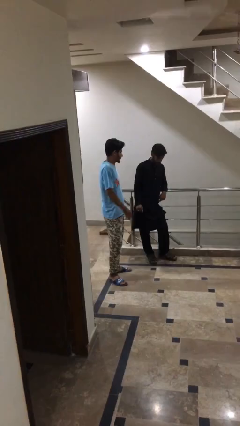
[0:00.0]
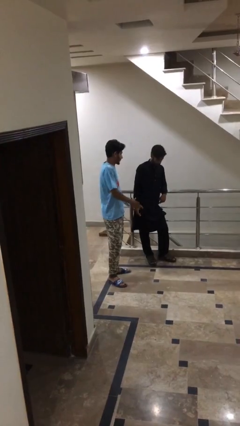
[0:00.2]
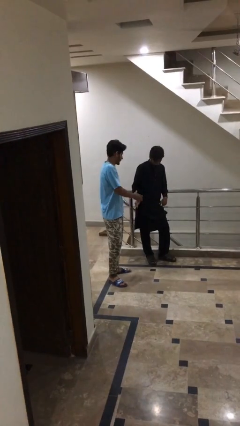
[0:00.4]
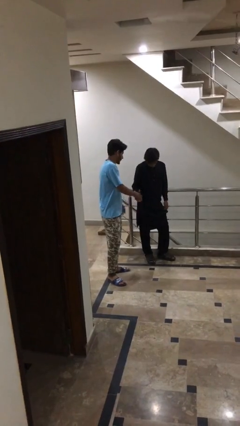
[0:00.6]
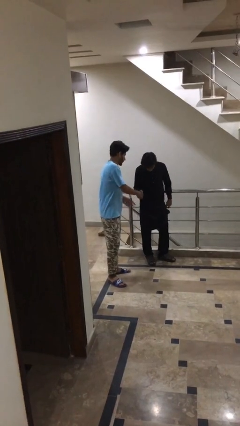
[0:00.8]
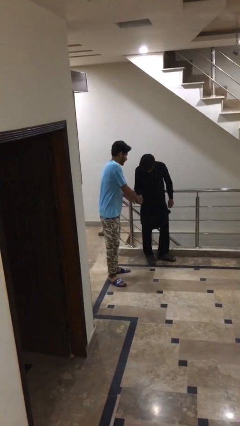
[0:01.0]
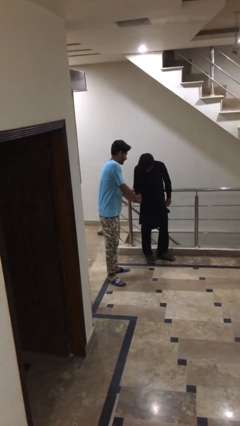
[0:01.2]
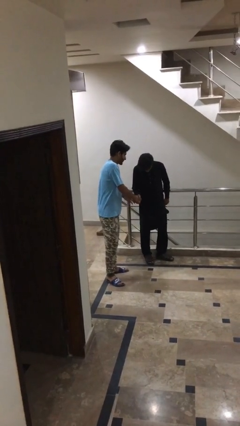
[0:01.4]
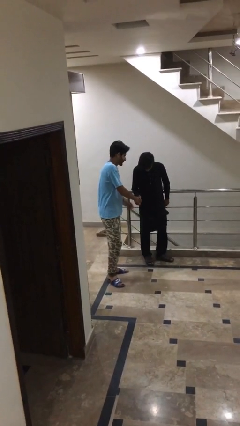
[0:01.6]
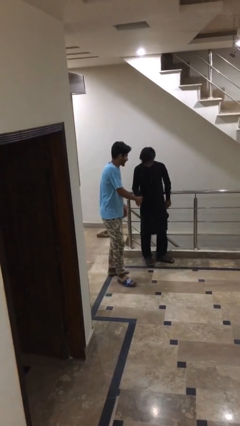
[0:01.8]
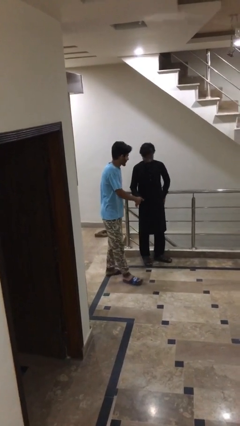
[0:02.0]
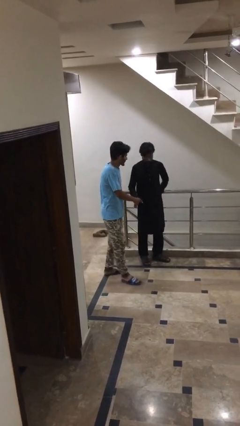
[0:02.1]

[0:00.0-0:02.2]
person shakes hand

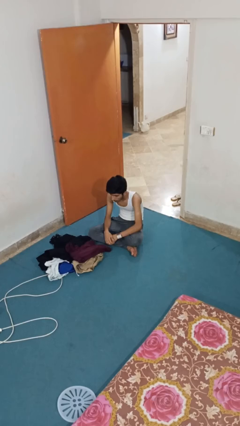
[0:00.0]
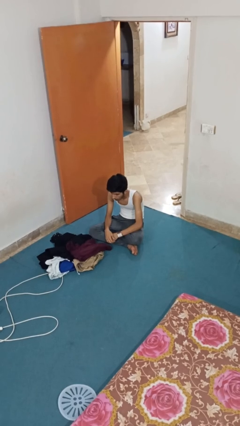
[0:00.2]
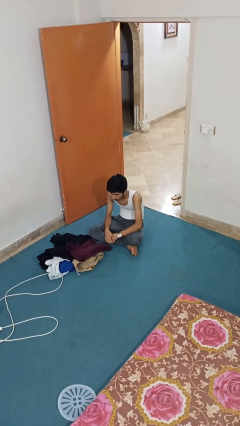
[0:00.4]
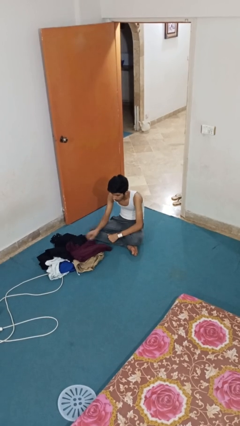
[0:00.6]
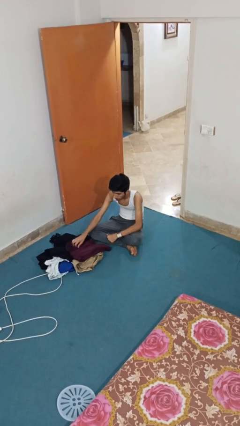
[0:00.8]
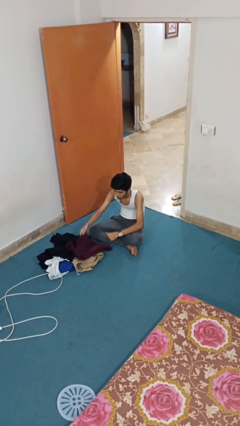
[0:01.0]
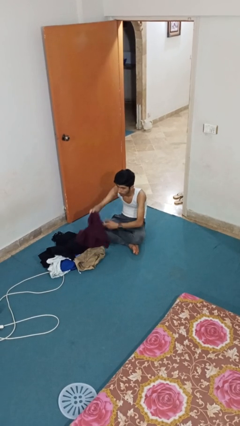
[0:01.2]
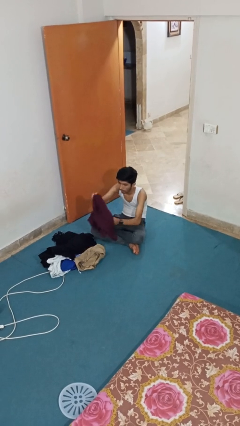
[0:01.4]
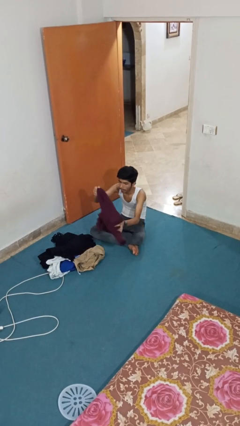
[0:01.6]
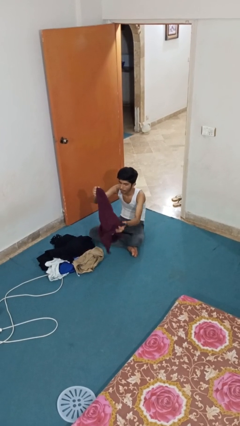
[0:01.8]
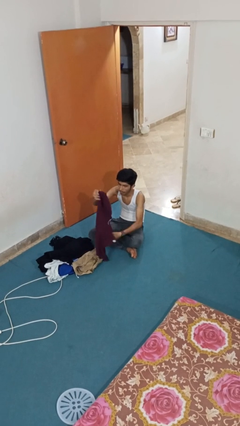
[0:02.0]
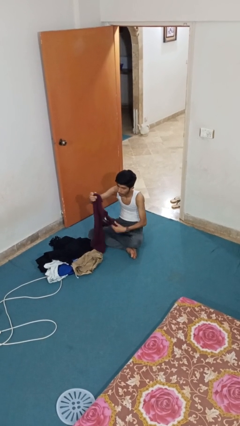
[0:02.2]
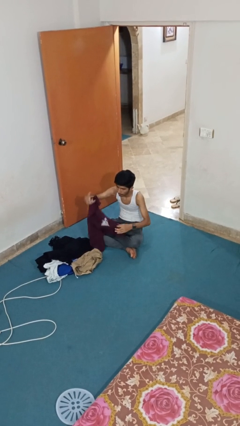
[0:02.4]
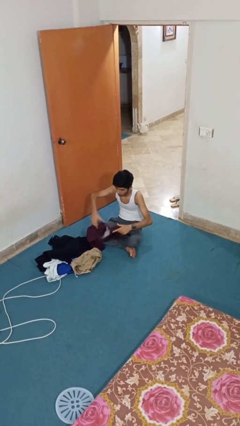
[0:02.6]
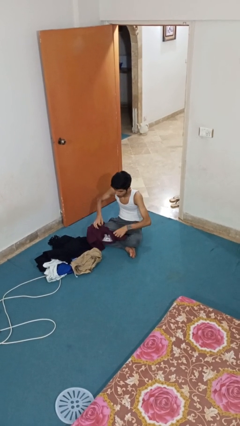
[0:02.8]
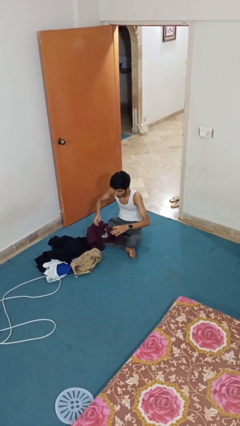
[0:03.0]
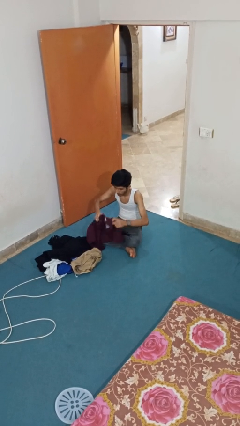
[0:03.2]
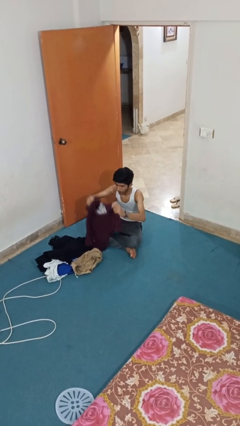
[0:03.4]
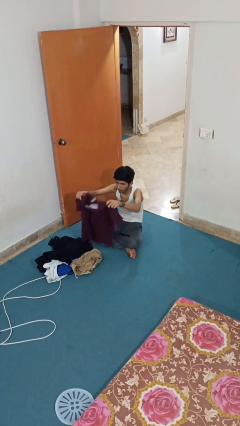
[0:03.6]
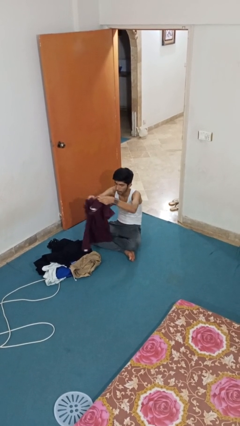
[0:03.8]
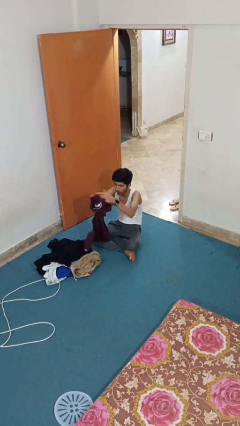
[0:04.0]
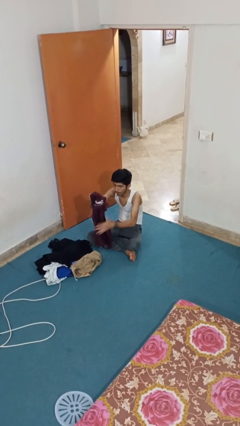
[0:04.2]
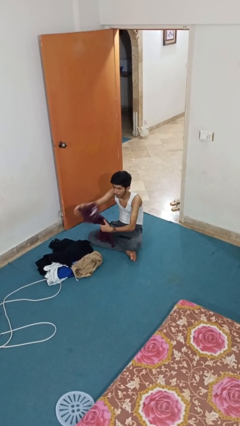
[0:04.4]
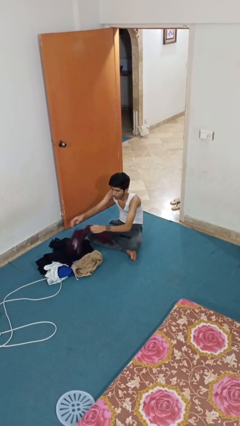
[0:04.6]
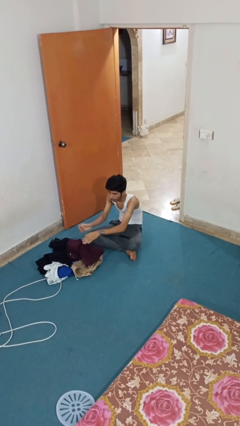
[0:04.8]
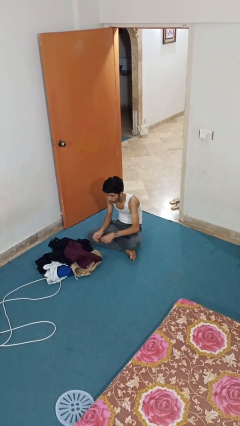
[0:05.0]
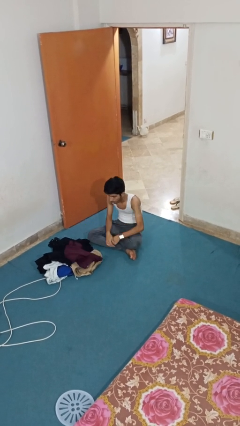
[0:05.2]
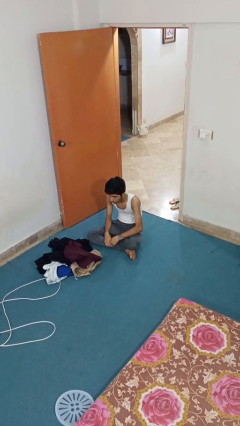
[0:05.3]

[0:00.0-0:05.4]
person folds shirt

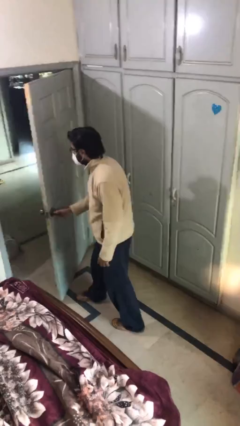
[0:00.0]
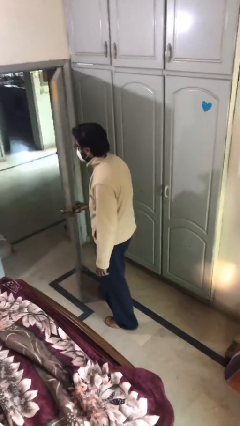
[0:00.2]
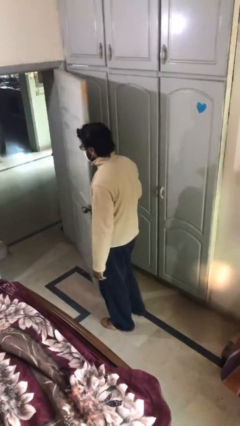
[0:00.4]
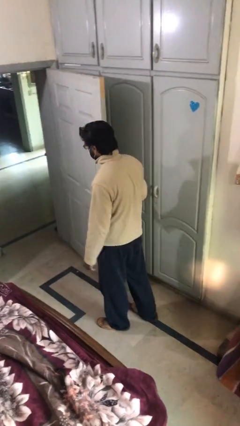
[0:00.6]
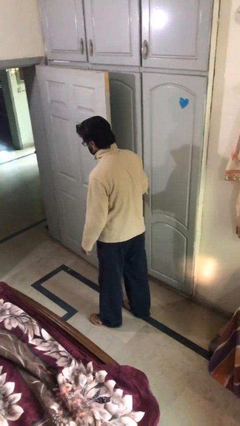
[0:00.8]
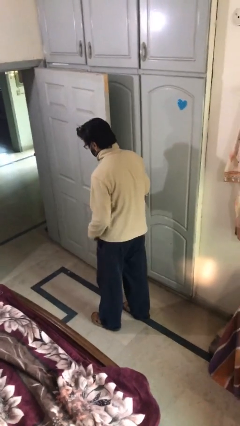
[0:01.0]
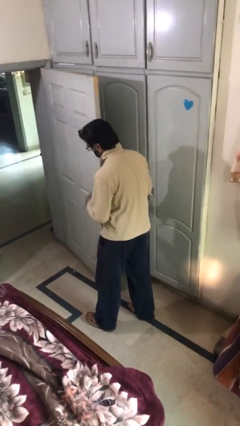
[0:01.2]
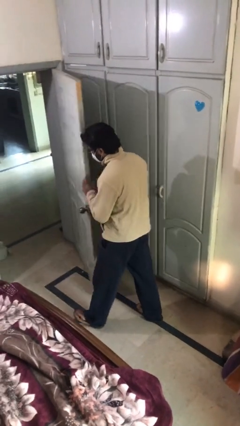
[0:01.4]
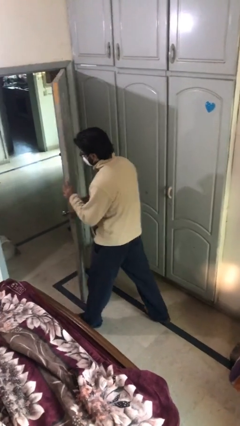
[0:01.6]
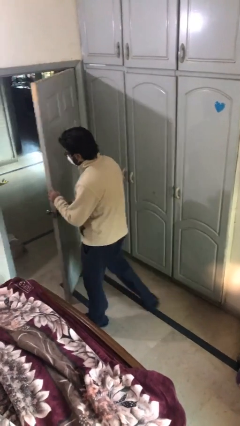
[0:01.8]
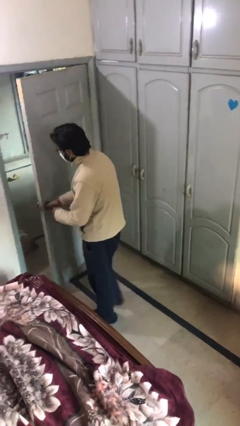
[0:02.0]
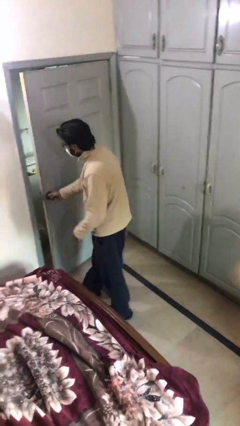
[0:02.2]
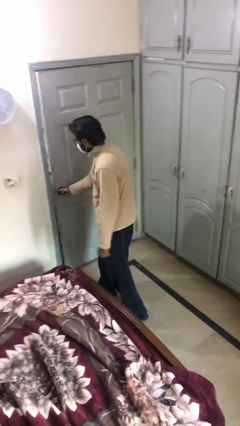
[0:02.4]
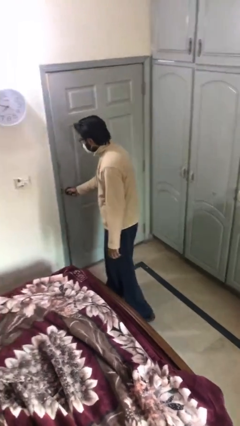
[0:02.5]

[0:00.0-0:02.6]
person closes facility door

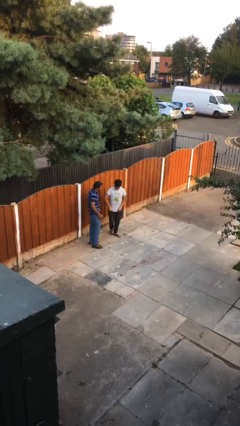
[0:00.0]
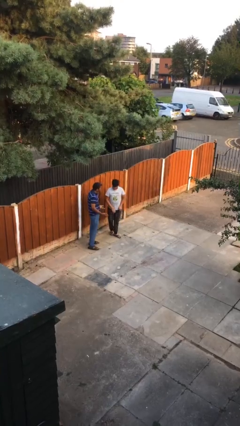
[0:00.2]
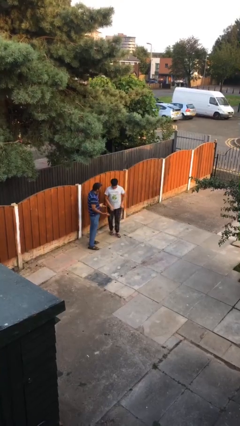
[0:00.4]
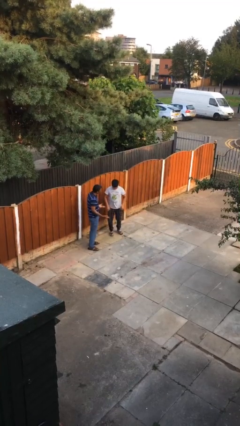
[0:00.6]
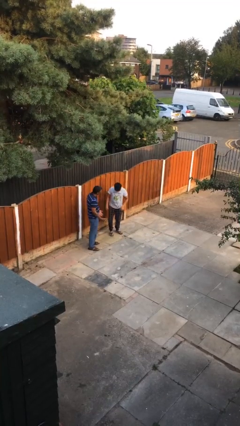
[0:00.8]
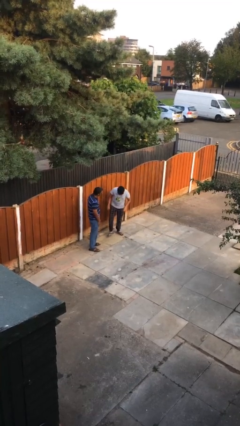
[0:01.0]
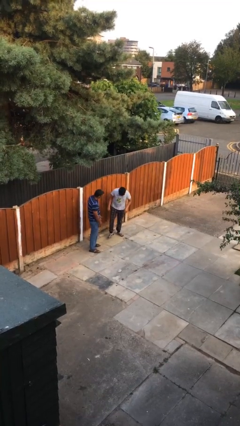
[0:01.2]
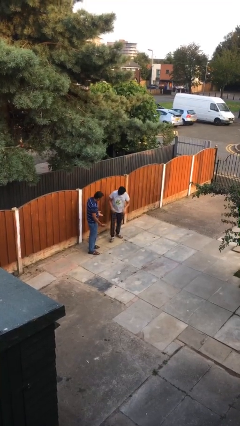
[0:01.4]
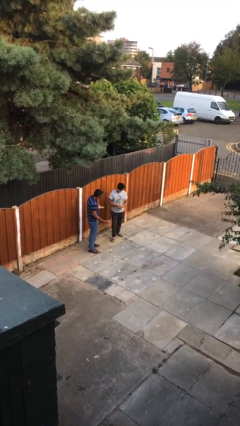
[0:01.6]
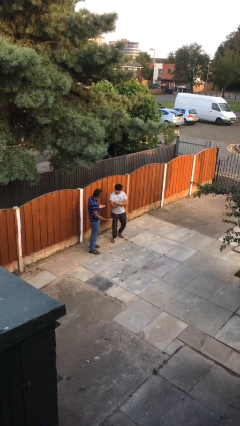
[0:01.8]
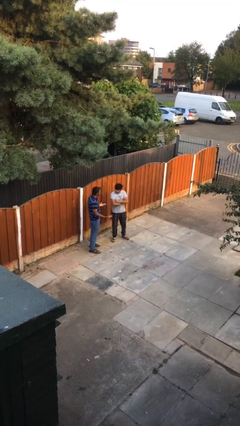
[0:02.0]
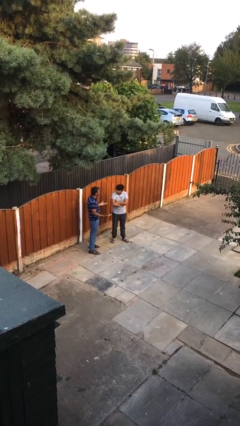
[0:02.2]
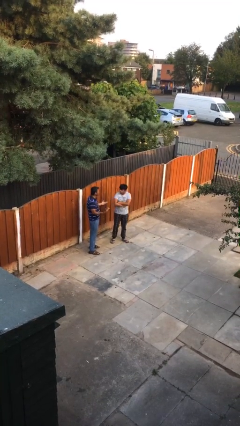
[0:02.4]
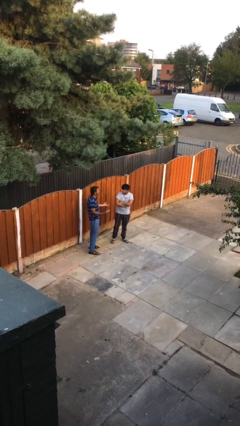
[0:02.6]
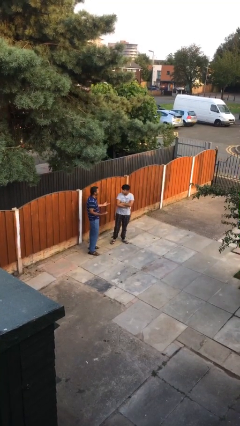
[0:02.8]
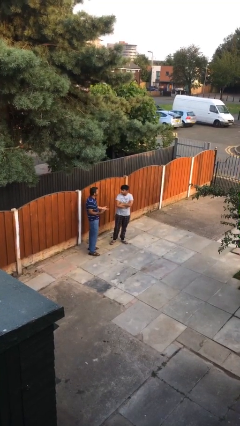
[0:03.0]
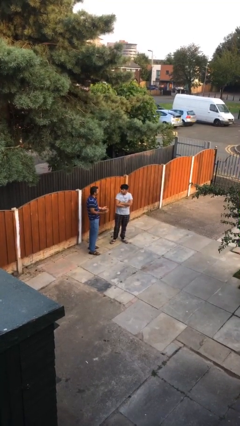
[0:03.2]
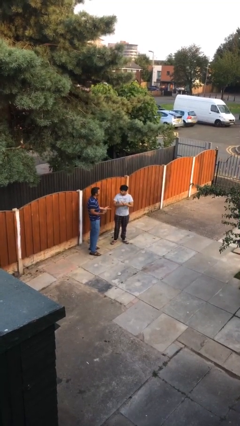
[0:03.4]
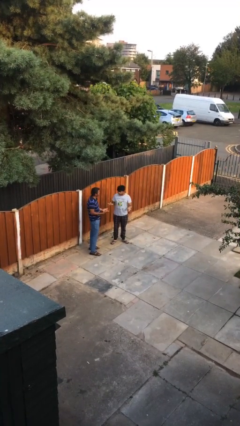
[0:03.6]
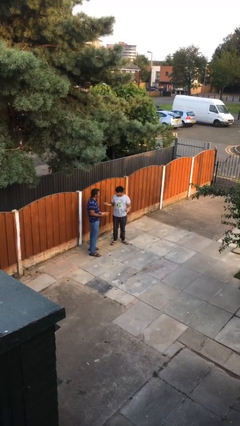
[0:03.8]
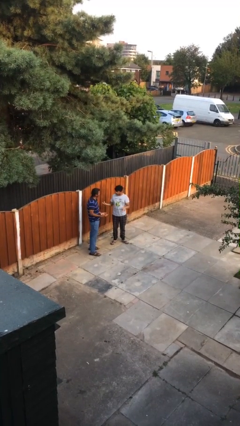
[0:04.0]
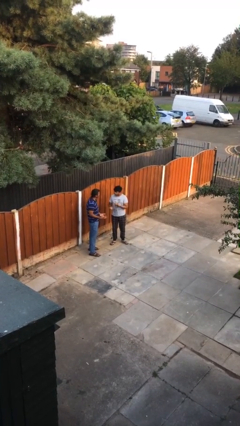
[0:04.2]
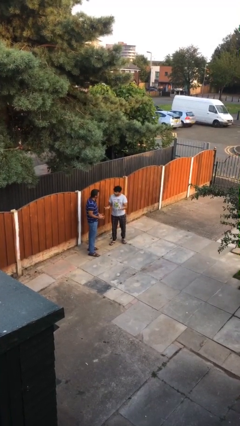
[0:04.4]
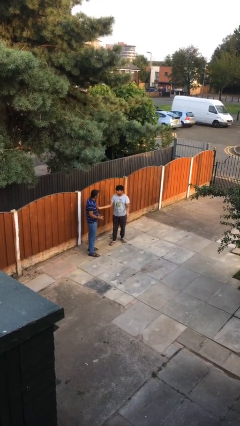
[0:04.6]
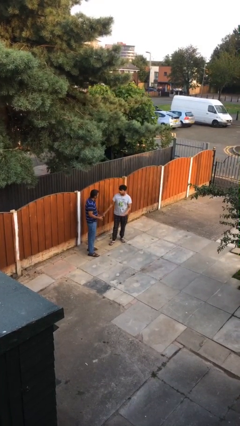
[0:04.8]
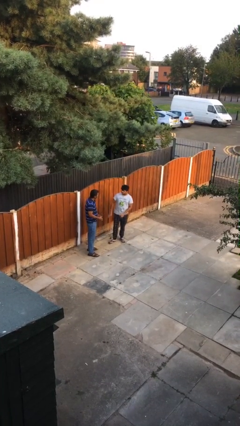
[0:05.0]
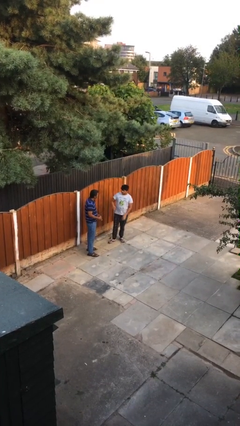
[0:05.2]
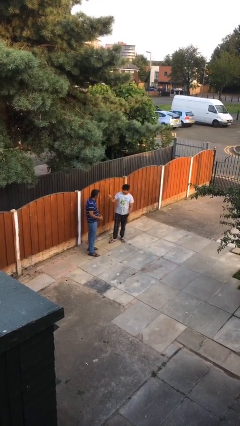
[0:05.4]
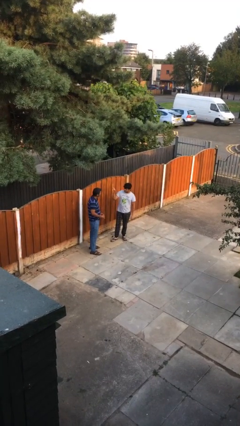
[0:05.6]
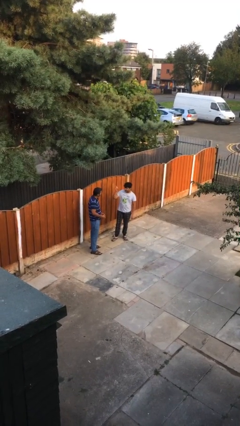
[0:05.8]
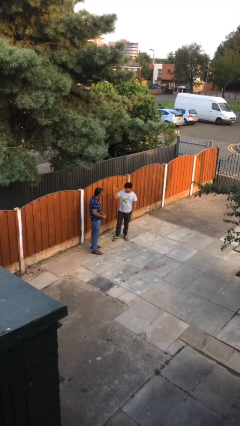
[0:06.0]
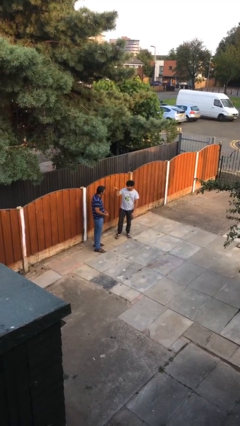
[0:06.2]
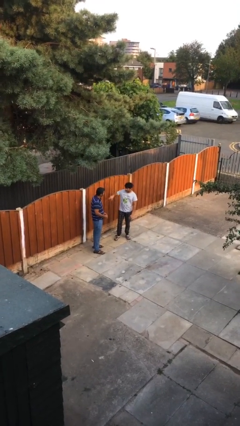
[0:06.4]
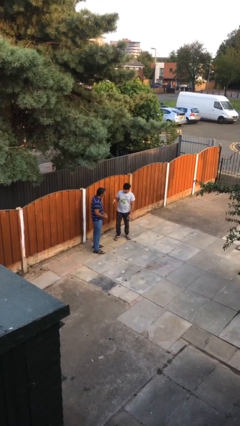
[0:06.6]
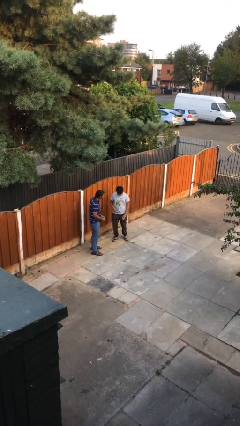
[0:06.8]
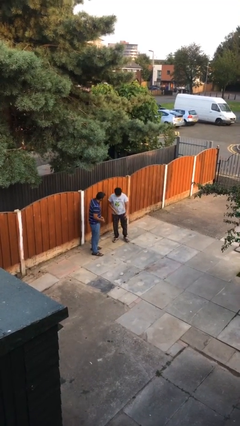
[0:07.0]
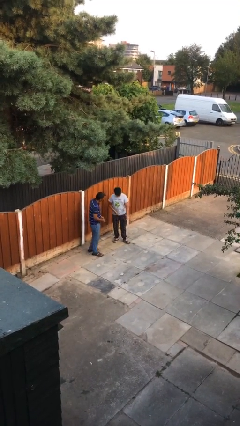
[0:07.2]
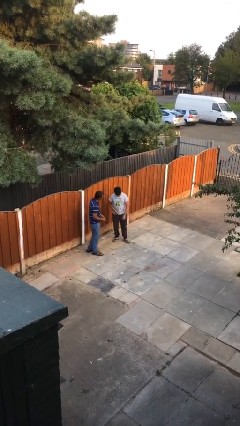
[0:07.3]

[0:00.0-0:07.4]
person talks to person

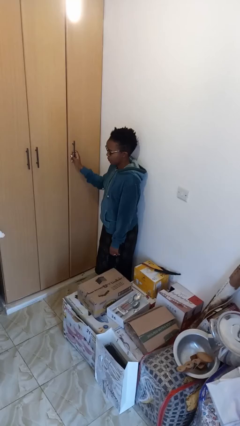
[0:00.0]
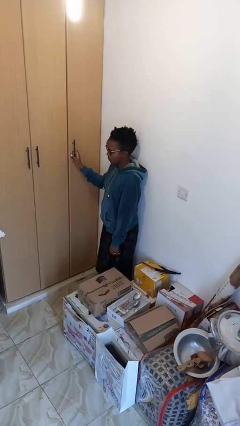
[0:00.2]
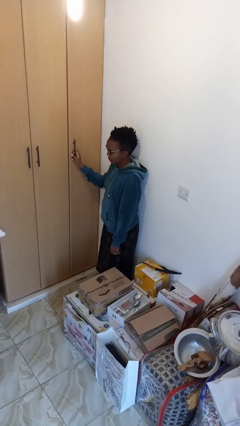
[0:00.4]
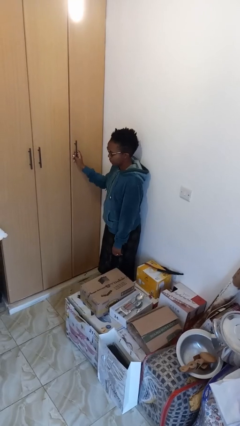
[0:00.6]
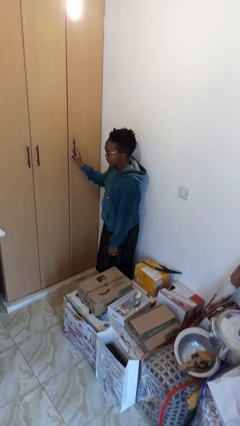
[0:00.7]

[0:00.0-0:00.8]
person closes closet door
